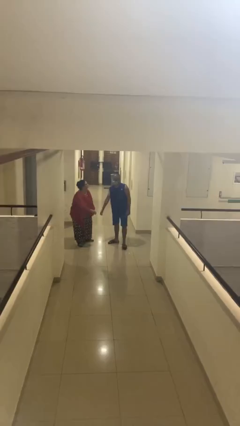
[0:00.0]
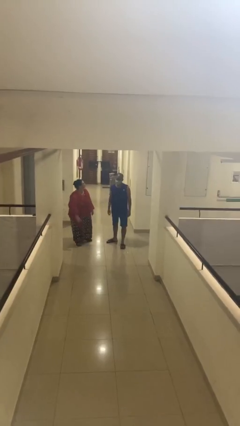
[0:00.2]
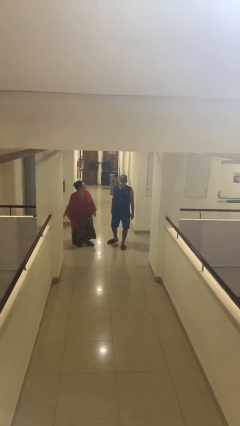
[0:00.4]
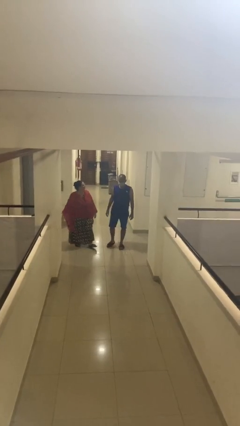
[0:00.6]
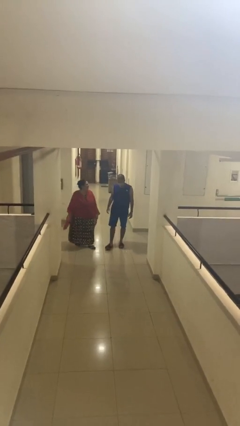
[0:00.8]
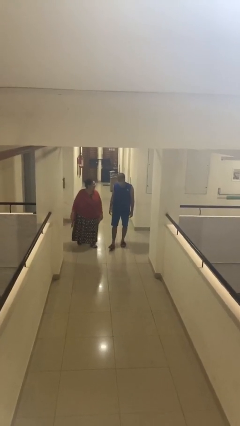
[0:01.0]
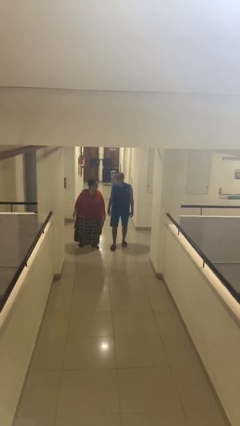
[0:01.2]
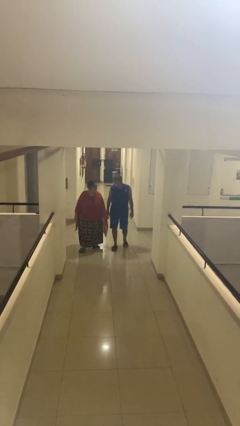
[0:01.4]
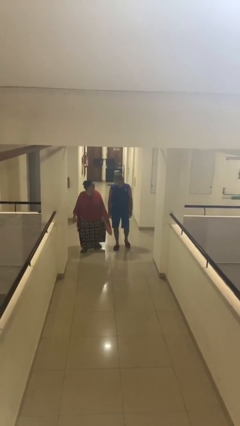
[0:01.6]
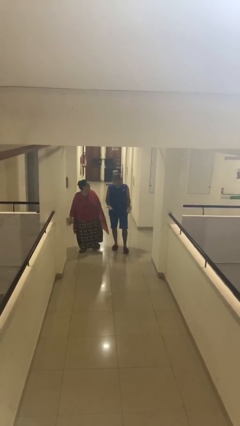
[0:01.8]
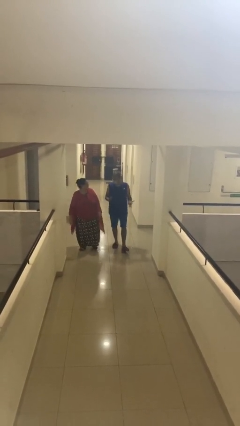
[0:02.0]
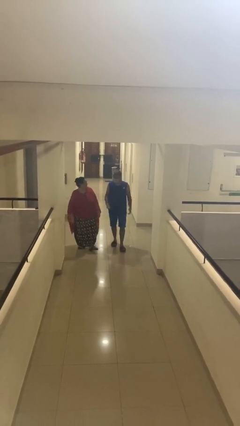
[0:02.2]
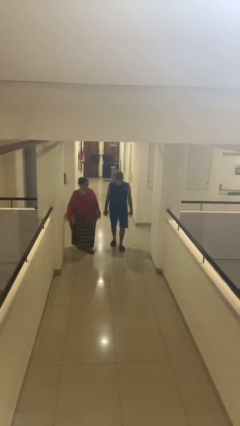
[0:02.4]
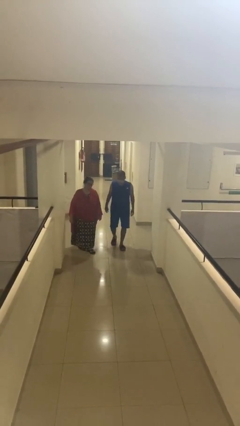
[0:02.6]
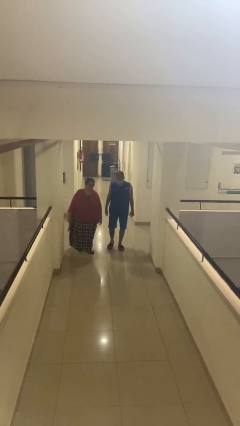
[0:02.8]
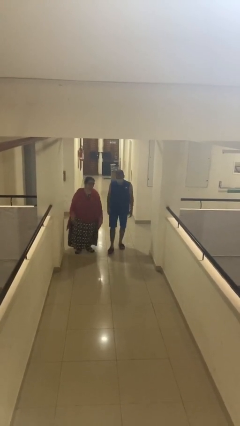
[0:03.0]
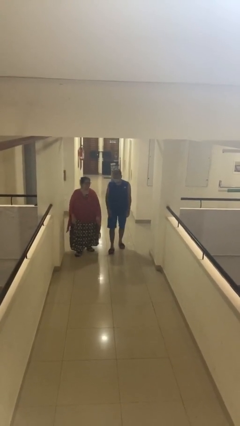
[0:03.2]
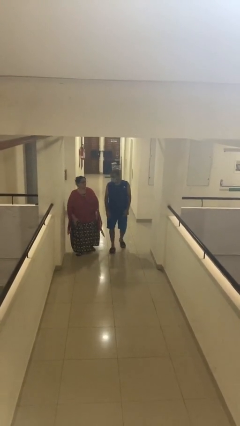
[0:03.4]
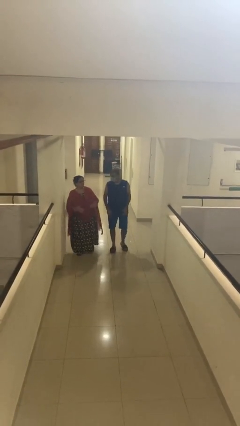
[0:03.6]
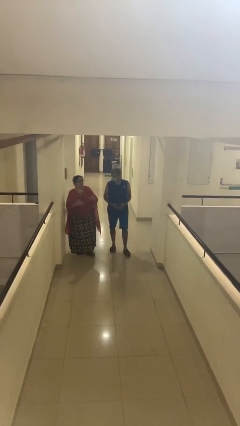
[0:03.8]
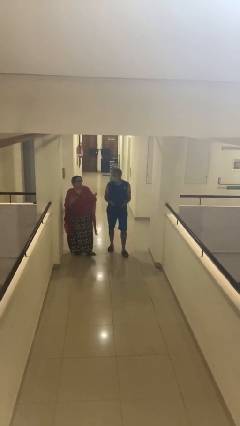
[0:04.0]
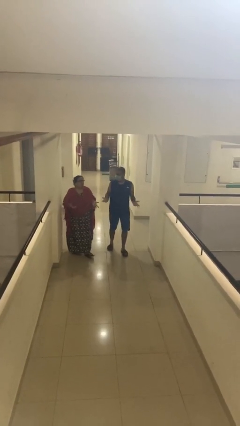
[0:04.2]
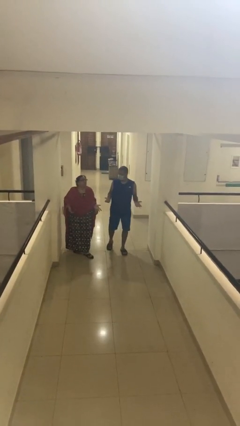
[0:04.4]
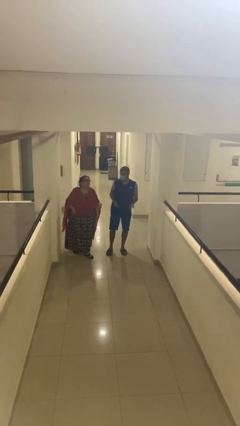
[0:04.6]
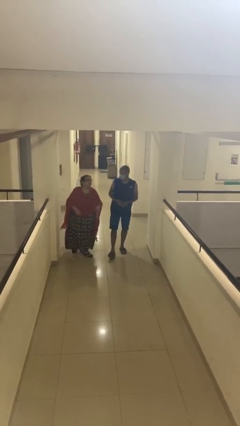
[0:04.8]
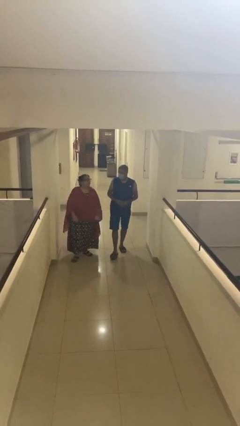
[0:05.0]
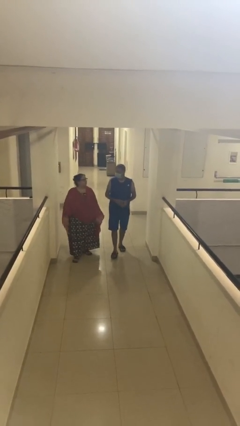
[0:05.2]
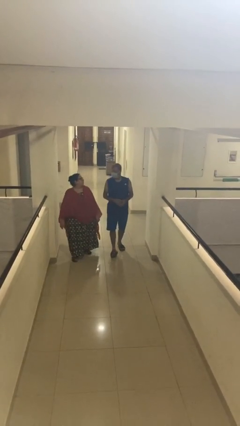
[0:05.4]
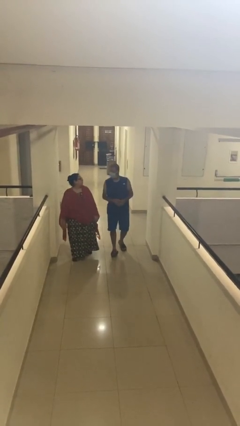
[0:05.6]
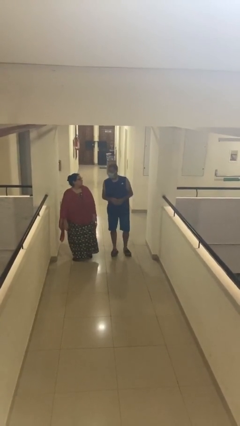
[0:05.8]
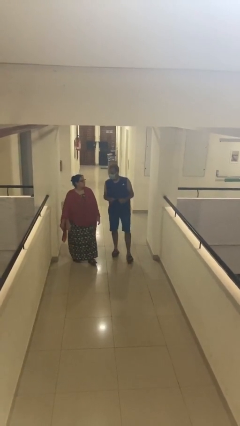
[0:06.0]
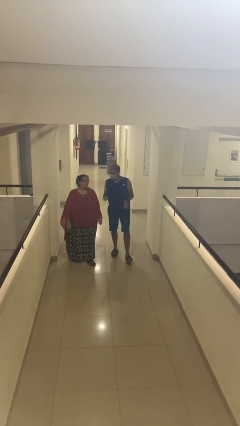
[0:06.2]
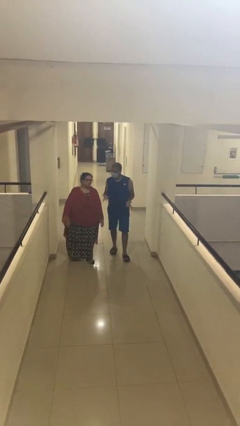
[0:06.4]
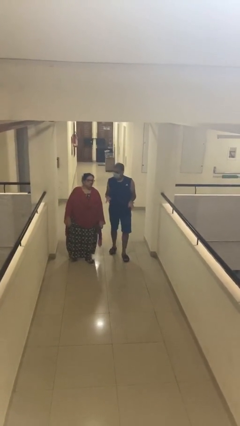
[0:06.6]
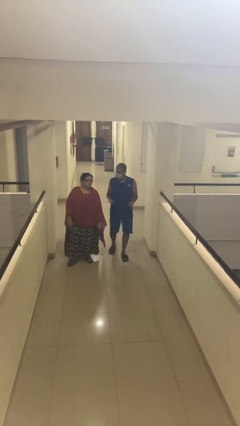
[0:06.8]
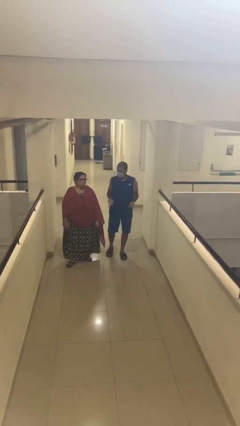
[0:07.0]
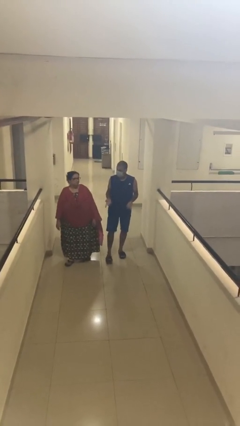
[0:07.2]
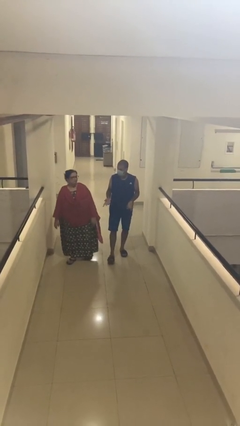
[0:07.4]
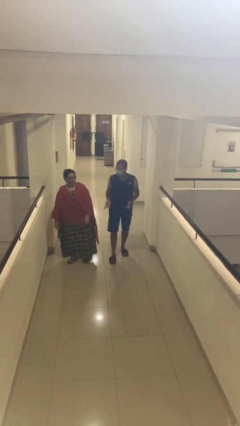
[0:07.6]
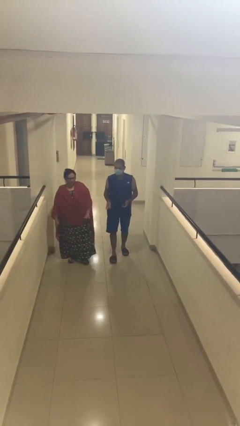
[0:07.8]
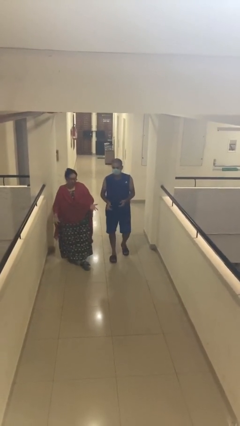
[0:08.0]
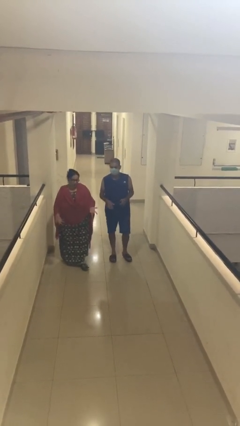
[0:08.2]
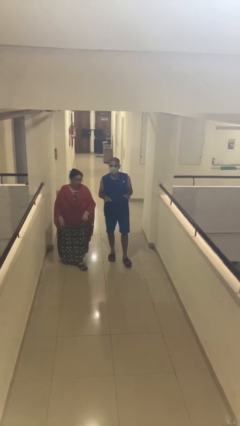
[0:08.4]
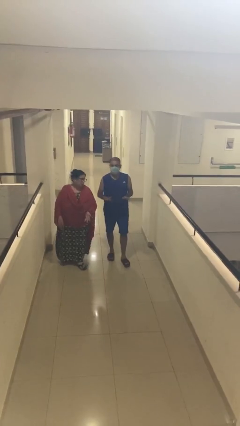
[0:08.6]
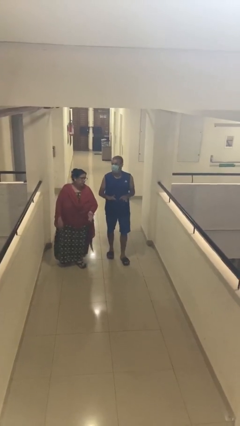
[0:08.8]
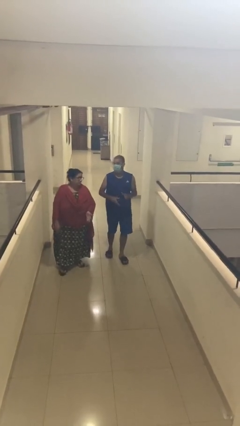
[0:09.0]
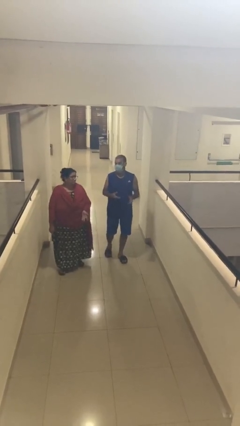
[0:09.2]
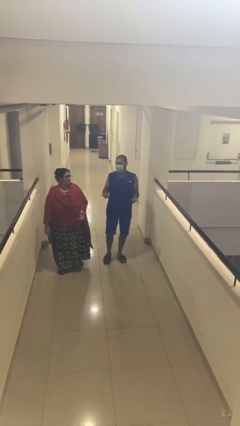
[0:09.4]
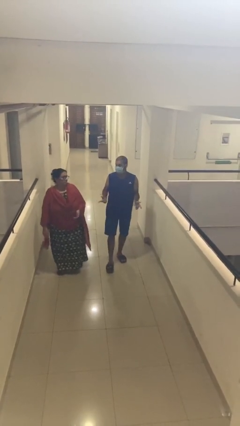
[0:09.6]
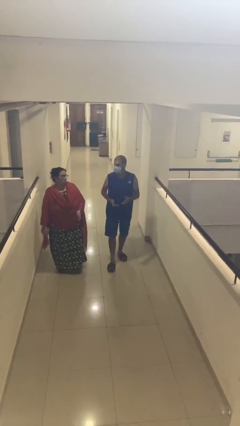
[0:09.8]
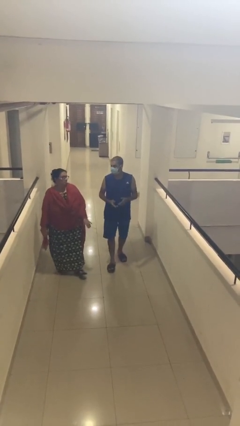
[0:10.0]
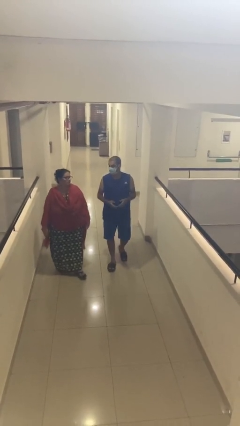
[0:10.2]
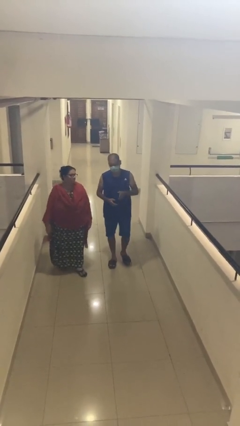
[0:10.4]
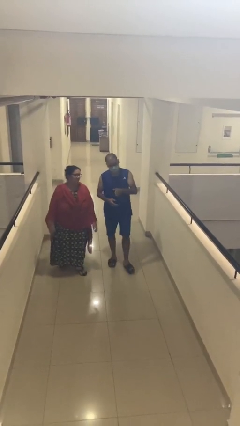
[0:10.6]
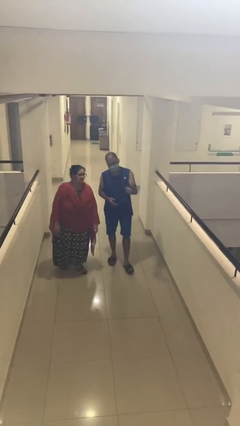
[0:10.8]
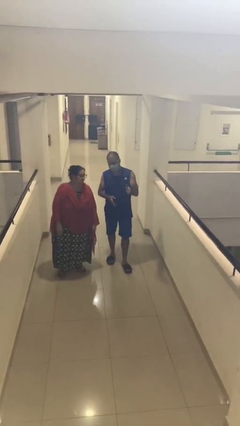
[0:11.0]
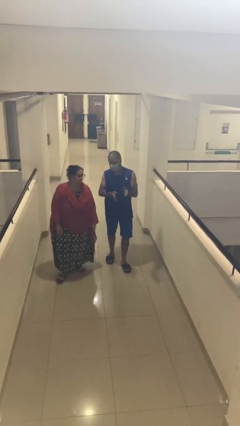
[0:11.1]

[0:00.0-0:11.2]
person talks to person

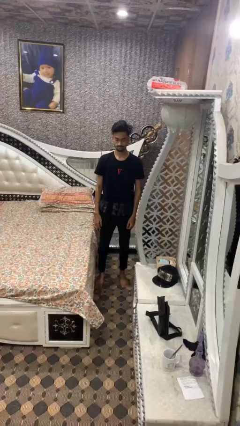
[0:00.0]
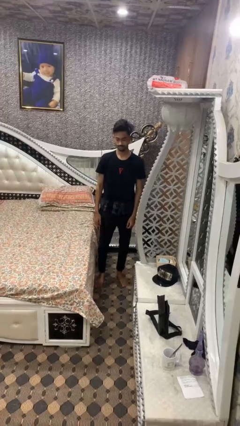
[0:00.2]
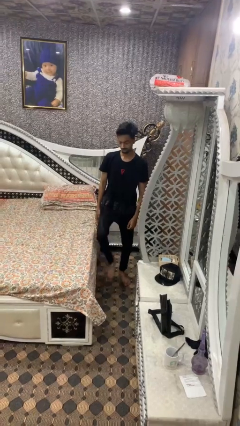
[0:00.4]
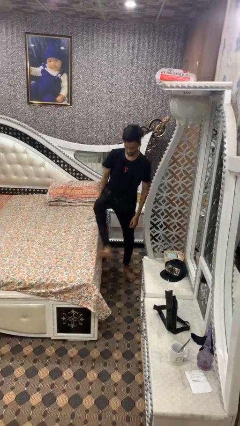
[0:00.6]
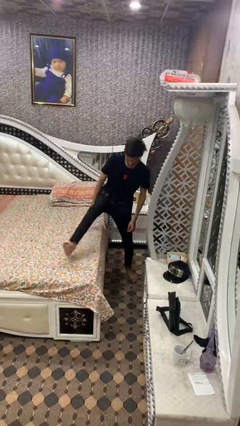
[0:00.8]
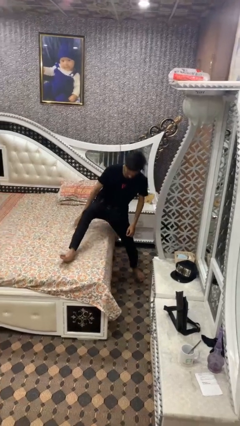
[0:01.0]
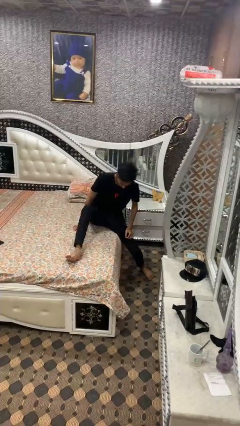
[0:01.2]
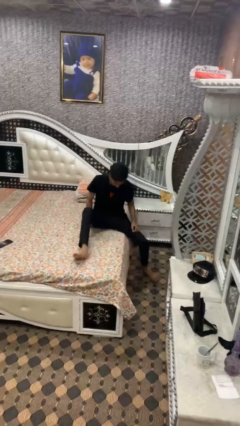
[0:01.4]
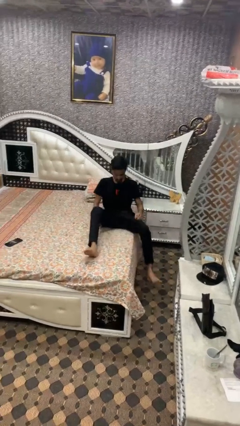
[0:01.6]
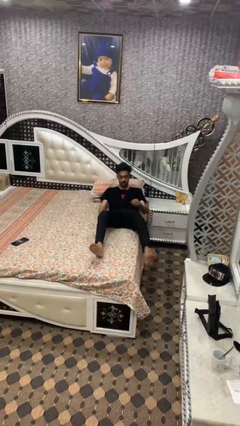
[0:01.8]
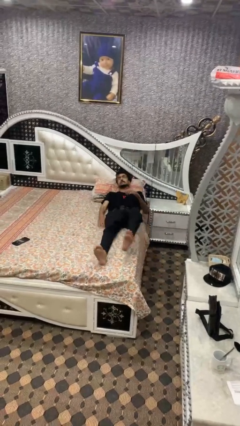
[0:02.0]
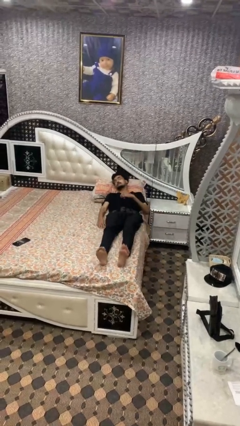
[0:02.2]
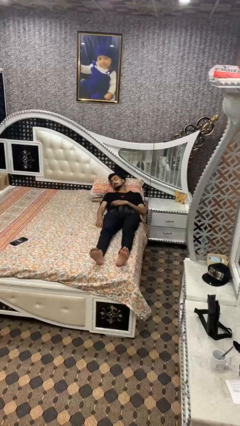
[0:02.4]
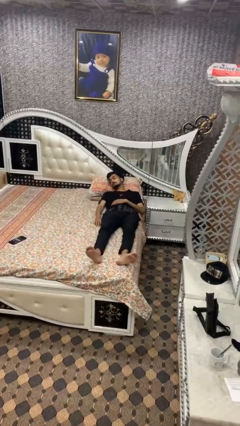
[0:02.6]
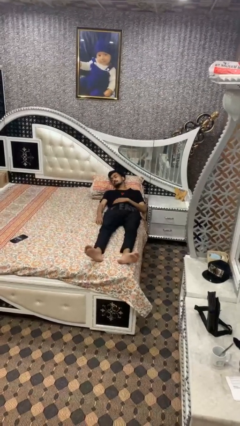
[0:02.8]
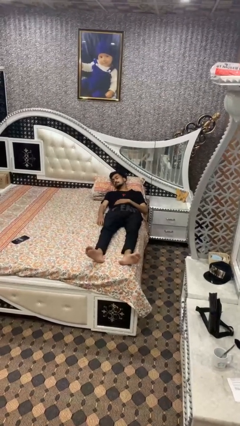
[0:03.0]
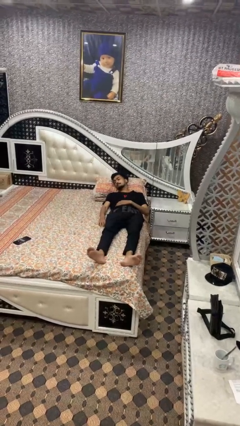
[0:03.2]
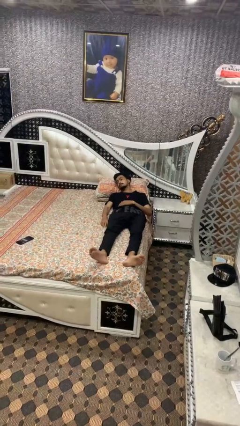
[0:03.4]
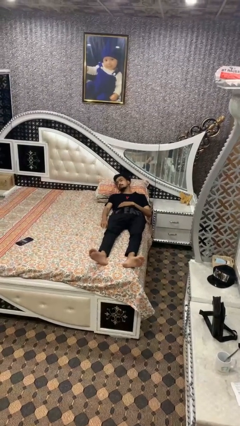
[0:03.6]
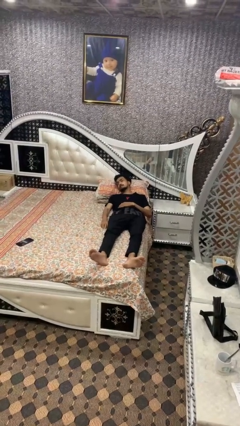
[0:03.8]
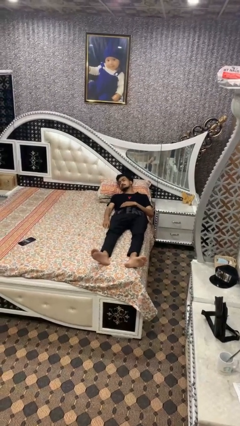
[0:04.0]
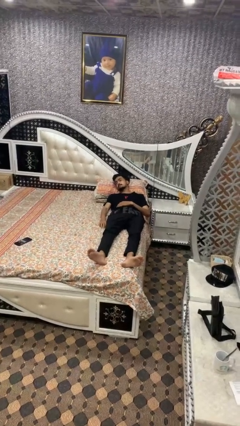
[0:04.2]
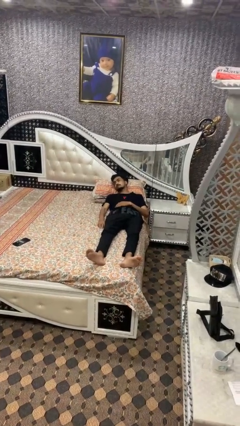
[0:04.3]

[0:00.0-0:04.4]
person lies down on bed

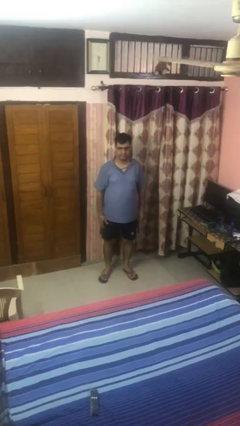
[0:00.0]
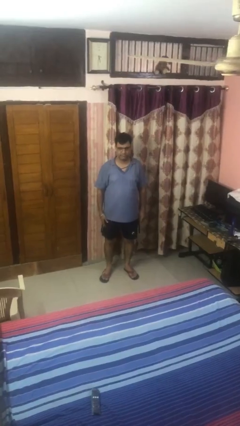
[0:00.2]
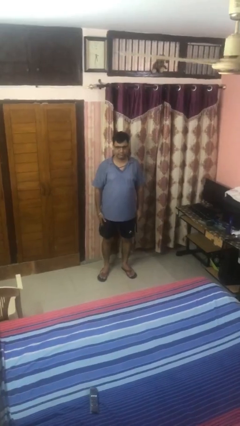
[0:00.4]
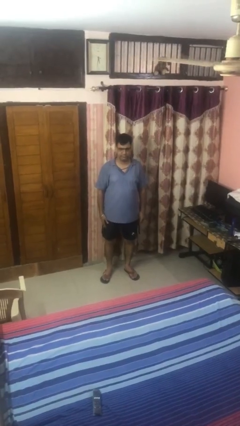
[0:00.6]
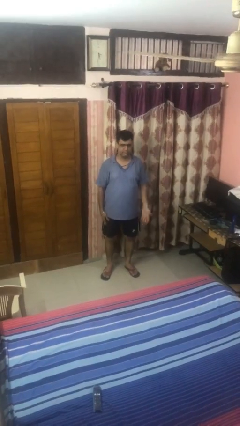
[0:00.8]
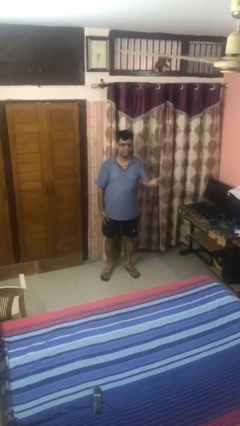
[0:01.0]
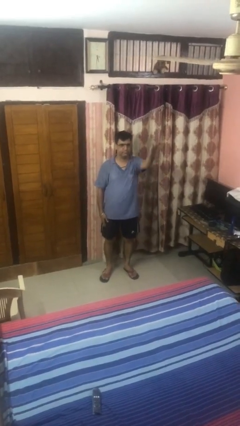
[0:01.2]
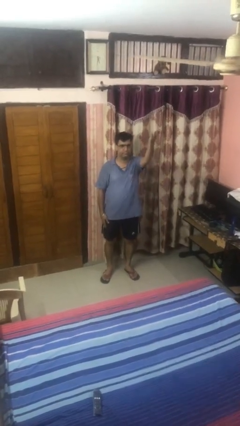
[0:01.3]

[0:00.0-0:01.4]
person gestures swipe up

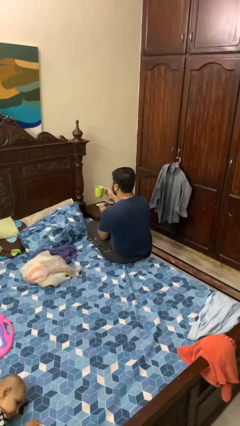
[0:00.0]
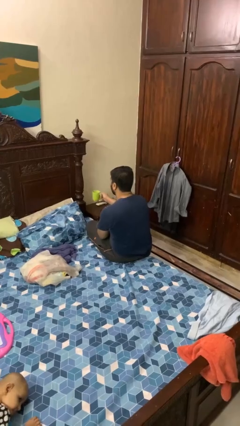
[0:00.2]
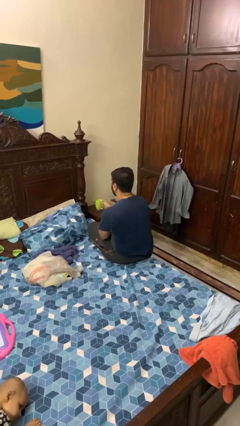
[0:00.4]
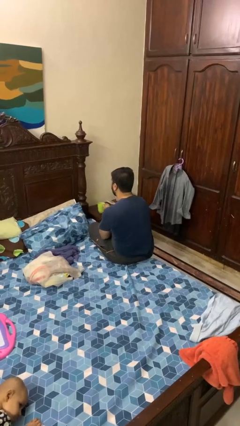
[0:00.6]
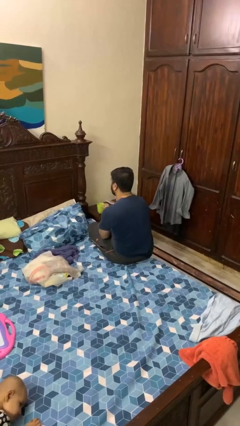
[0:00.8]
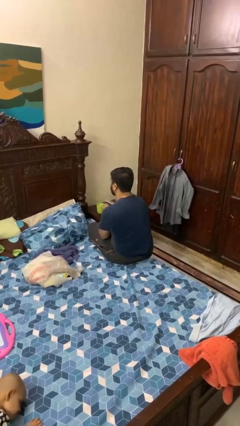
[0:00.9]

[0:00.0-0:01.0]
person puts down object on table
